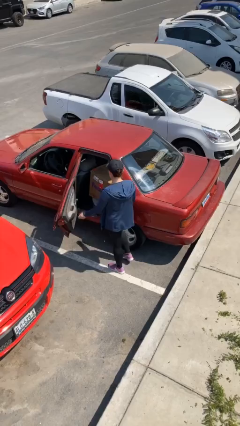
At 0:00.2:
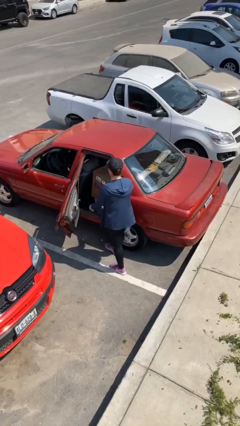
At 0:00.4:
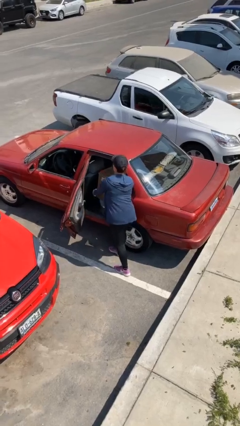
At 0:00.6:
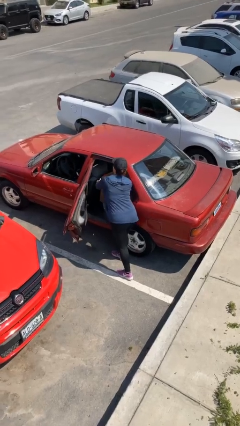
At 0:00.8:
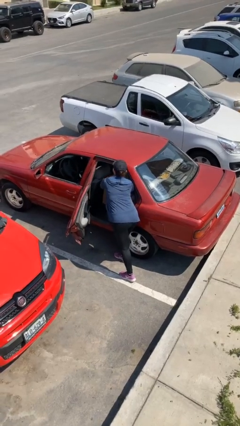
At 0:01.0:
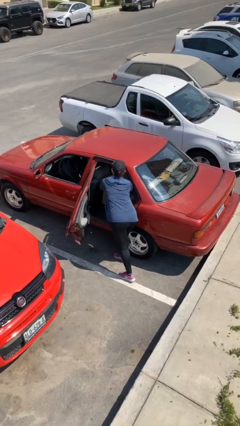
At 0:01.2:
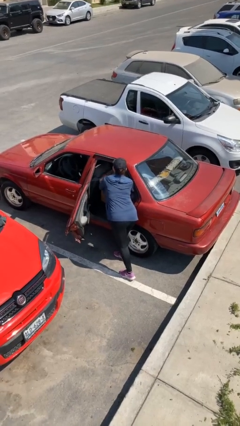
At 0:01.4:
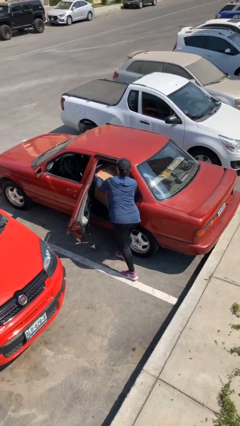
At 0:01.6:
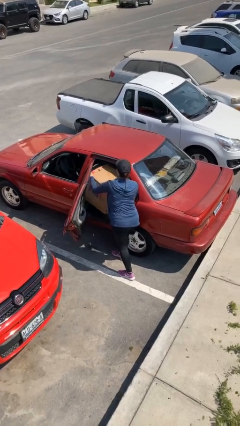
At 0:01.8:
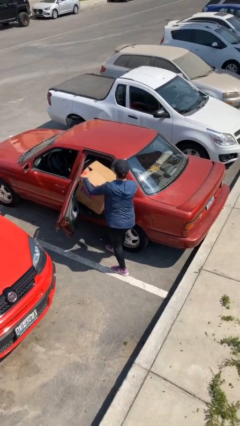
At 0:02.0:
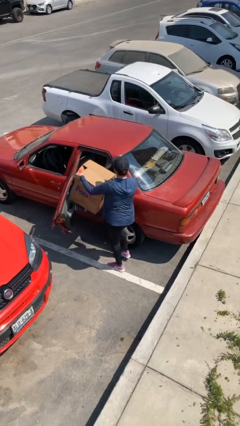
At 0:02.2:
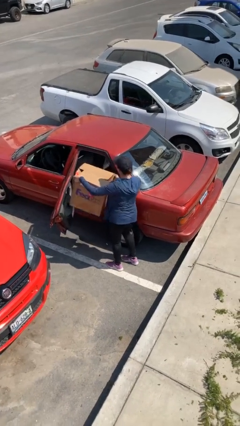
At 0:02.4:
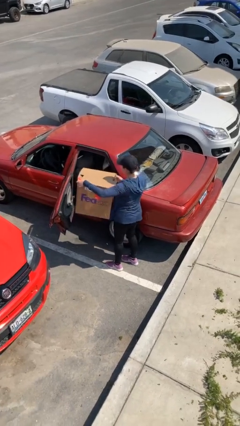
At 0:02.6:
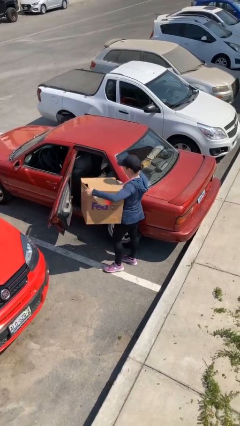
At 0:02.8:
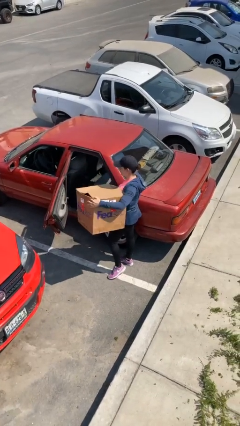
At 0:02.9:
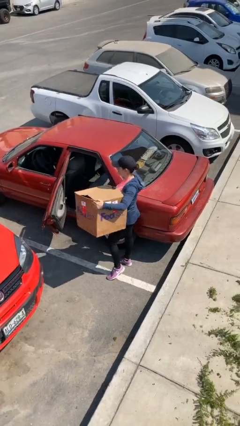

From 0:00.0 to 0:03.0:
person unloads car

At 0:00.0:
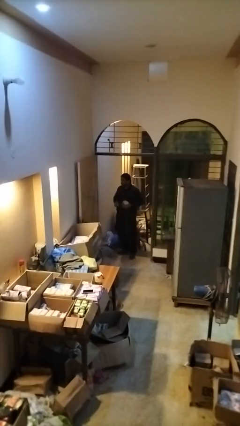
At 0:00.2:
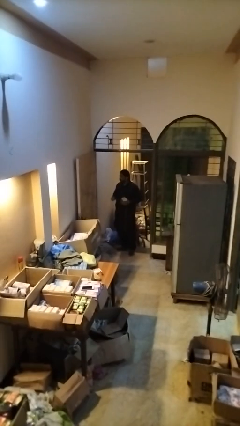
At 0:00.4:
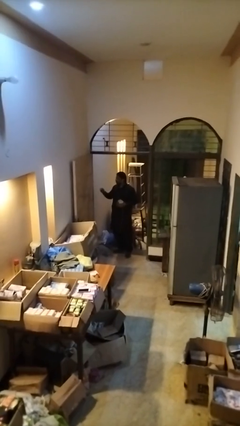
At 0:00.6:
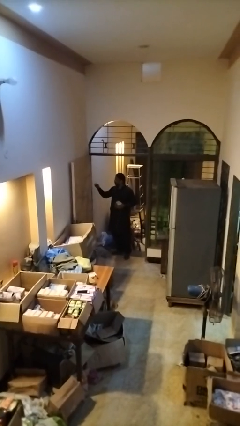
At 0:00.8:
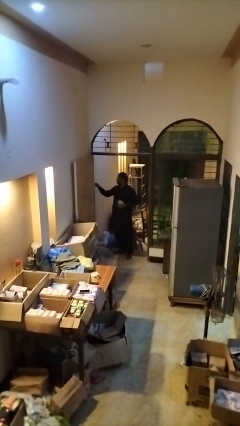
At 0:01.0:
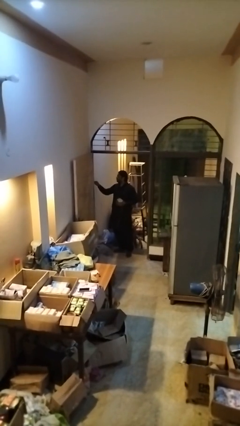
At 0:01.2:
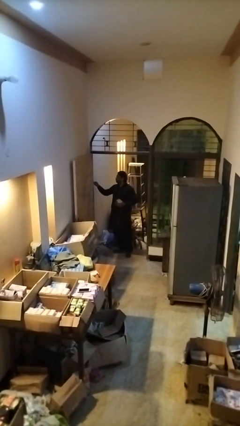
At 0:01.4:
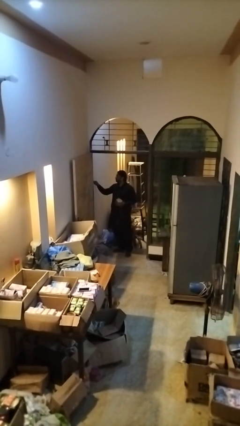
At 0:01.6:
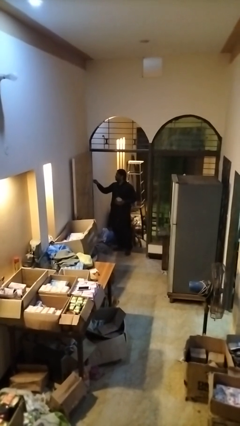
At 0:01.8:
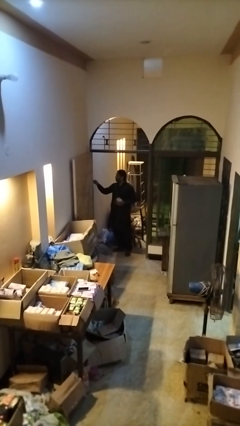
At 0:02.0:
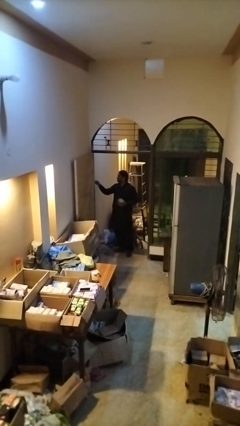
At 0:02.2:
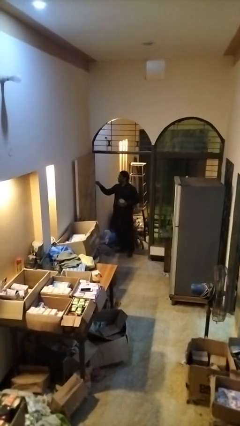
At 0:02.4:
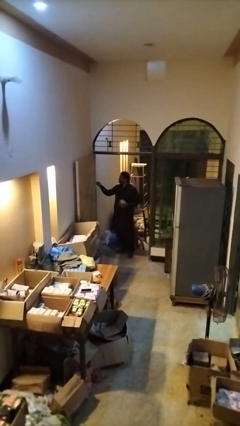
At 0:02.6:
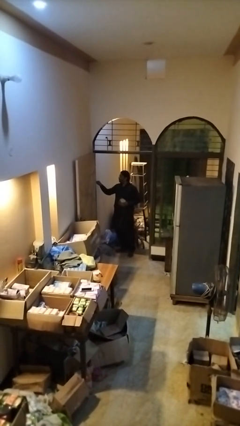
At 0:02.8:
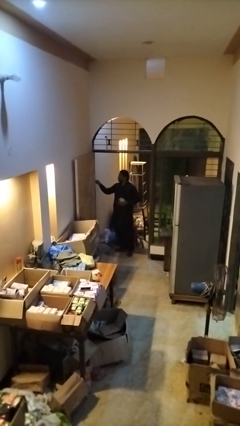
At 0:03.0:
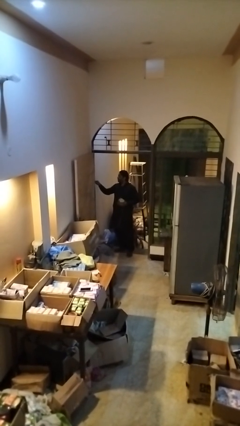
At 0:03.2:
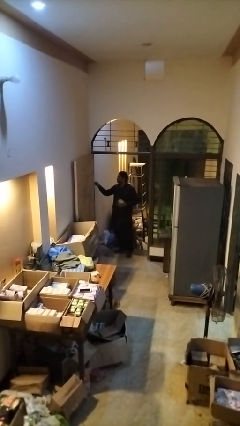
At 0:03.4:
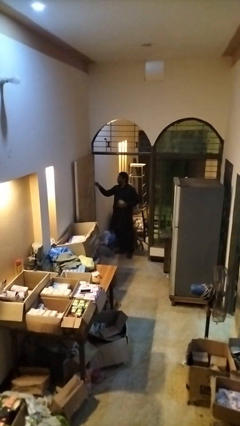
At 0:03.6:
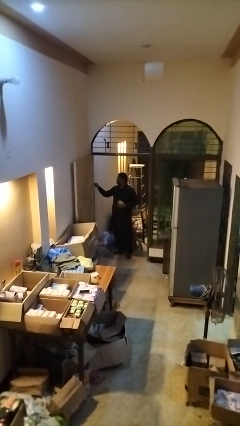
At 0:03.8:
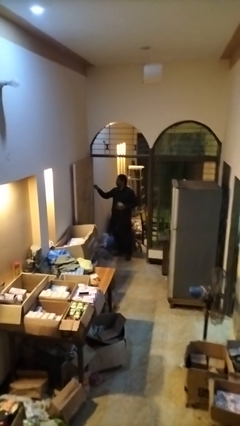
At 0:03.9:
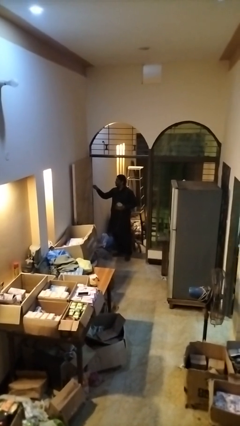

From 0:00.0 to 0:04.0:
person plugs into electrical socket

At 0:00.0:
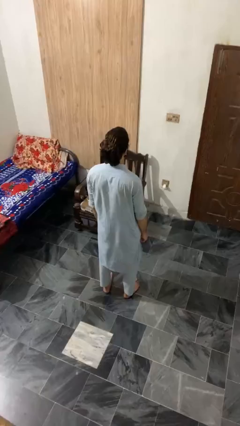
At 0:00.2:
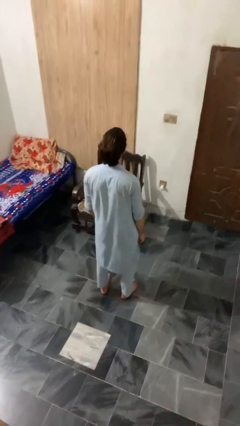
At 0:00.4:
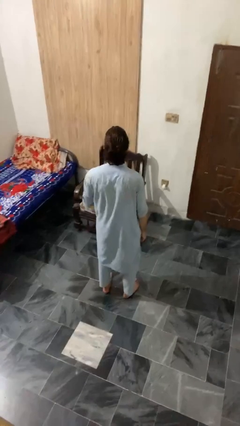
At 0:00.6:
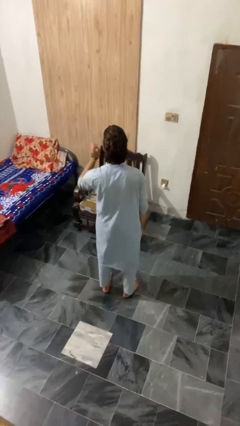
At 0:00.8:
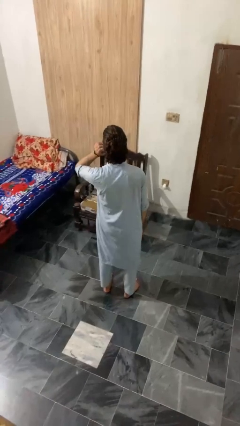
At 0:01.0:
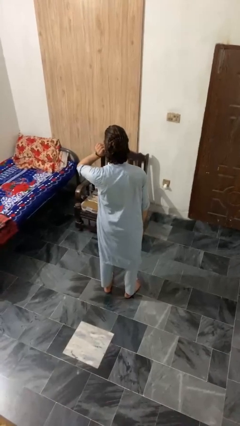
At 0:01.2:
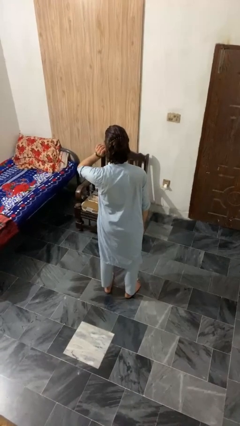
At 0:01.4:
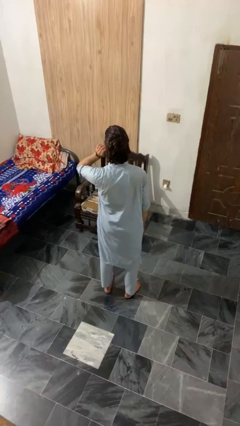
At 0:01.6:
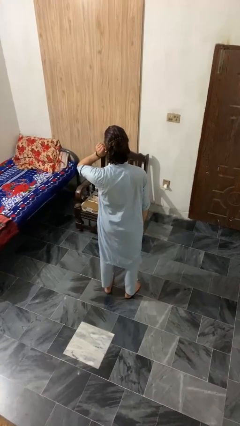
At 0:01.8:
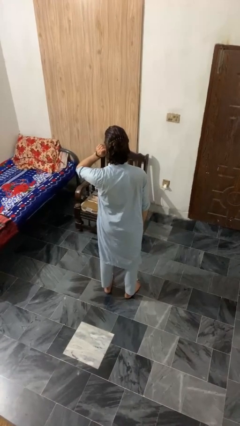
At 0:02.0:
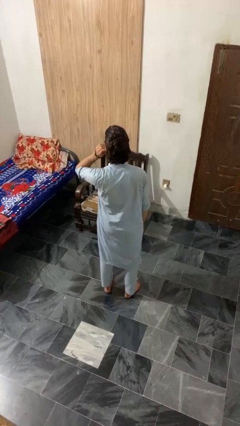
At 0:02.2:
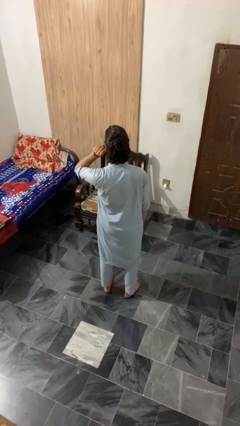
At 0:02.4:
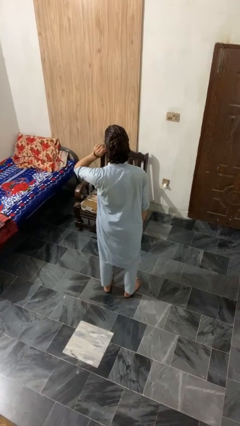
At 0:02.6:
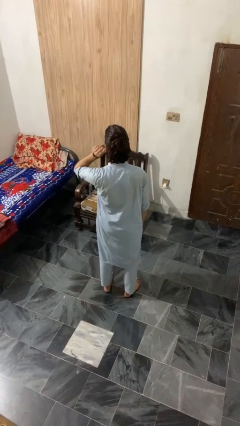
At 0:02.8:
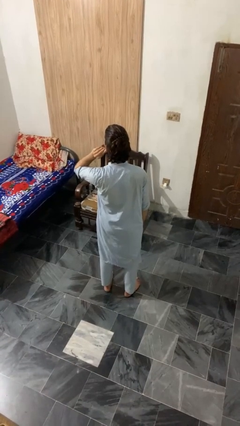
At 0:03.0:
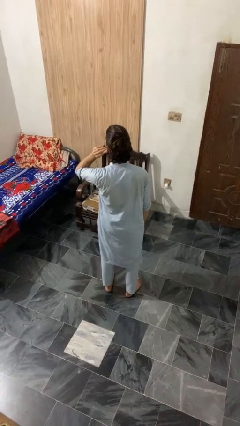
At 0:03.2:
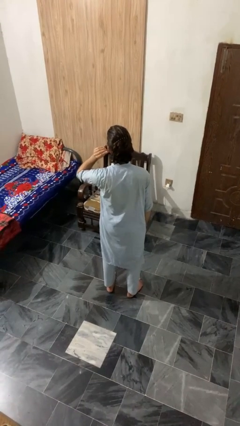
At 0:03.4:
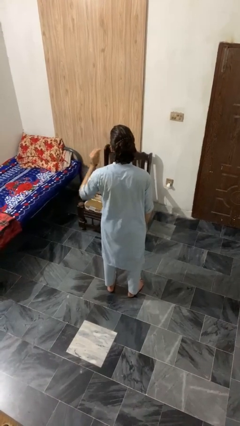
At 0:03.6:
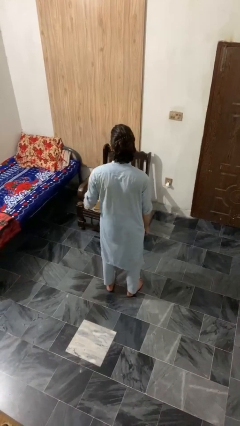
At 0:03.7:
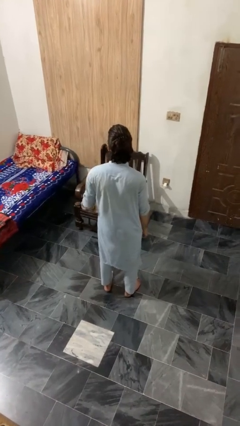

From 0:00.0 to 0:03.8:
person touches earlobe

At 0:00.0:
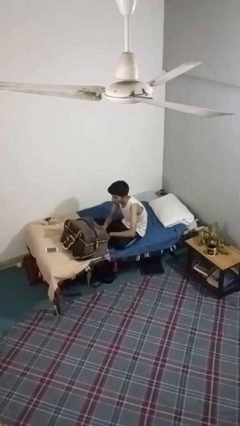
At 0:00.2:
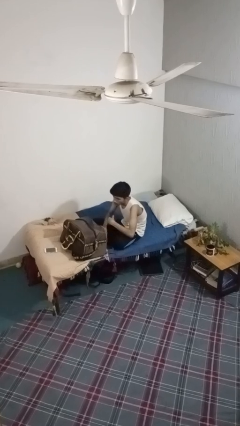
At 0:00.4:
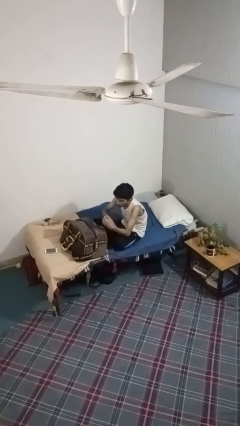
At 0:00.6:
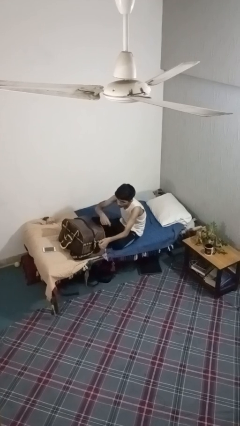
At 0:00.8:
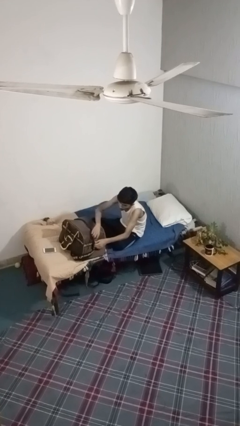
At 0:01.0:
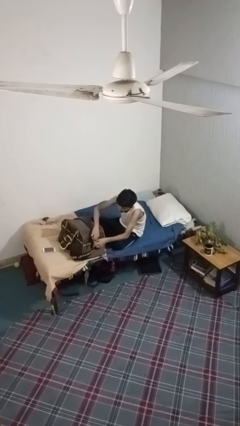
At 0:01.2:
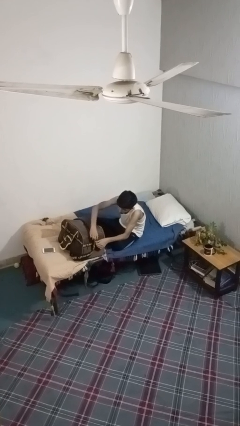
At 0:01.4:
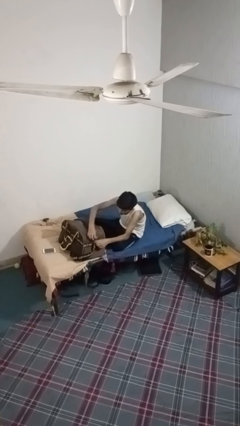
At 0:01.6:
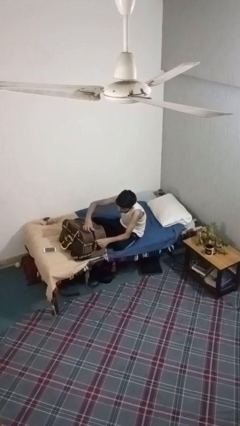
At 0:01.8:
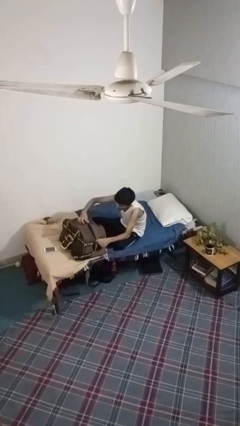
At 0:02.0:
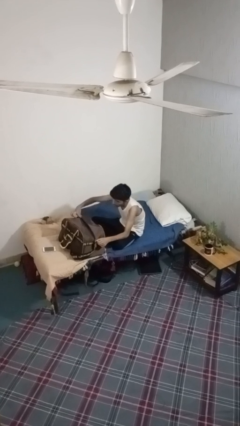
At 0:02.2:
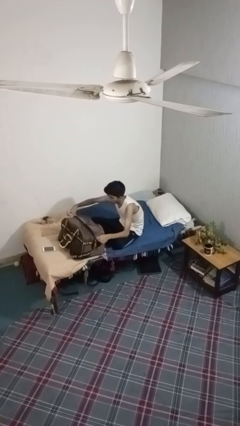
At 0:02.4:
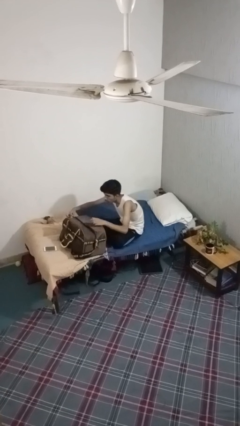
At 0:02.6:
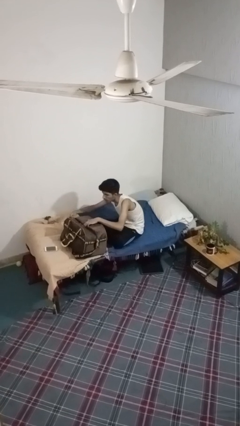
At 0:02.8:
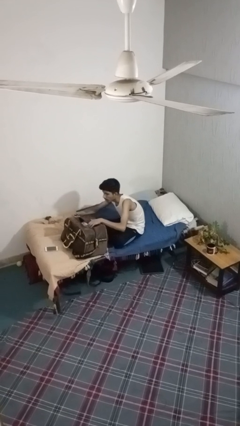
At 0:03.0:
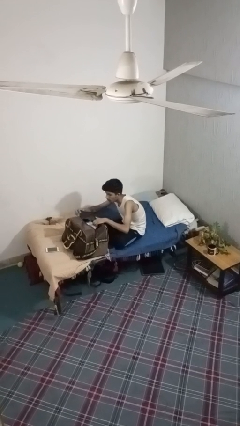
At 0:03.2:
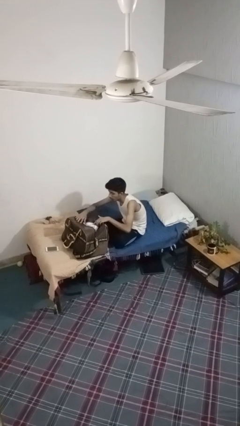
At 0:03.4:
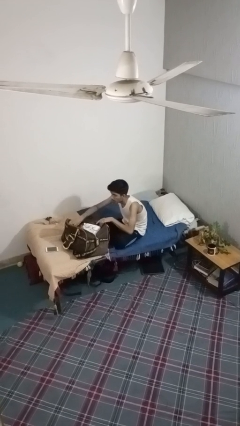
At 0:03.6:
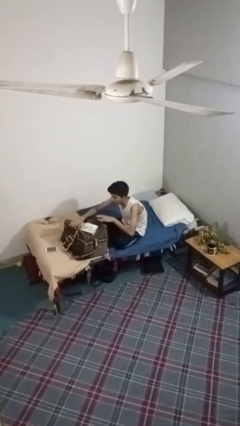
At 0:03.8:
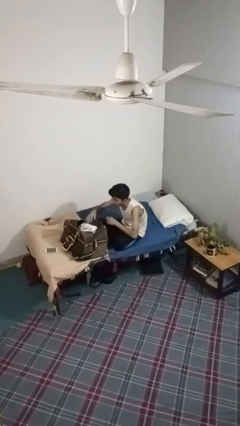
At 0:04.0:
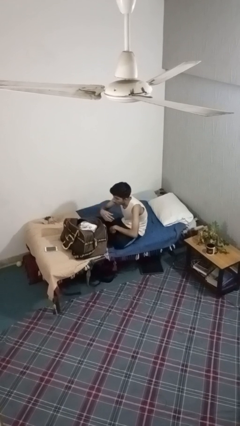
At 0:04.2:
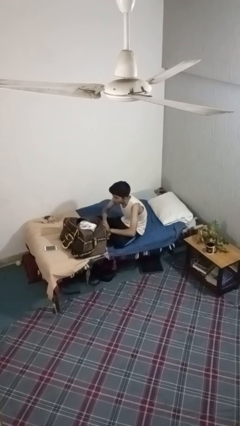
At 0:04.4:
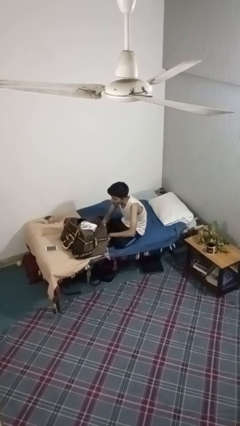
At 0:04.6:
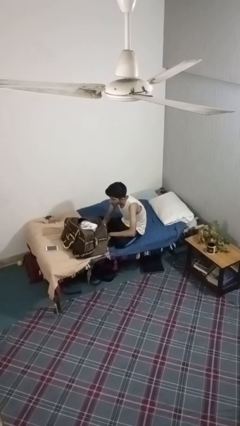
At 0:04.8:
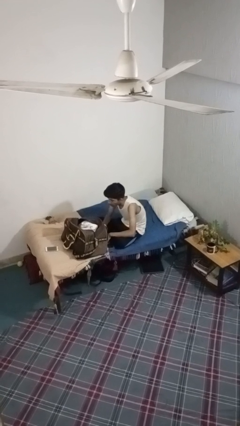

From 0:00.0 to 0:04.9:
person opens suitcase

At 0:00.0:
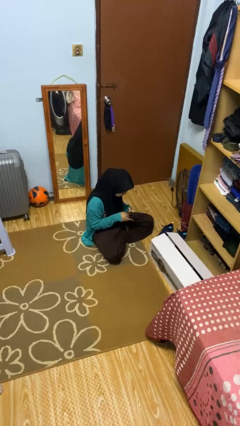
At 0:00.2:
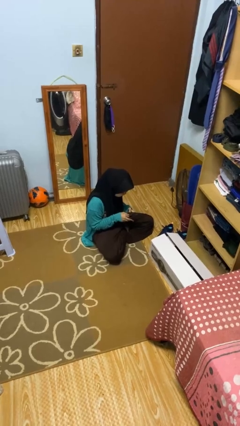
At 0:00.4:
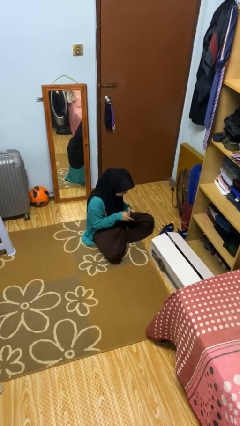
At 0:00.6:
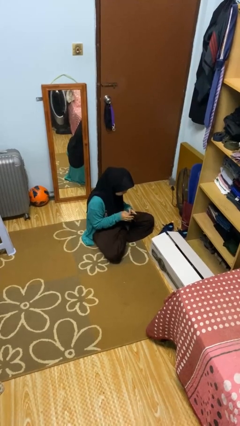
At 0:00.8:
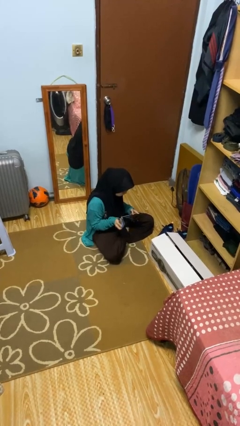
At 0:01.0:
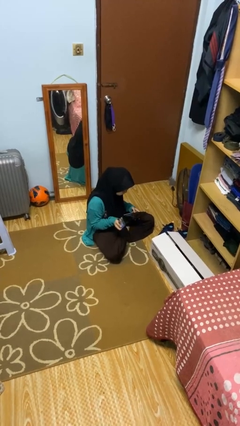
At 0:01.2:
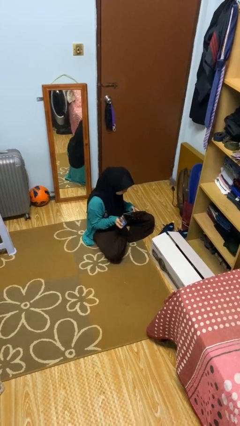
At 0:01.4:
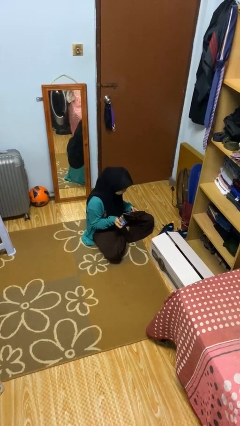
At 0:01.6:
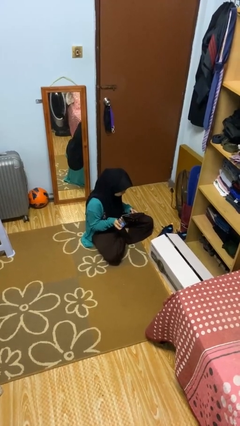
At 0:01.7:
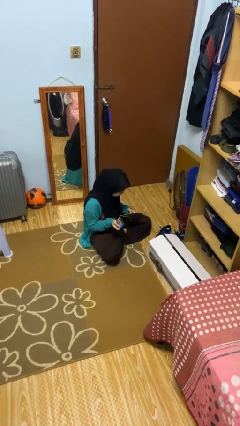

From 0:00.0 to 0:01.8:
person takes object from purse

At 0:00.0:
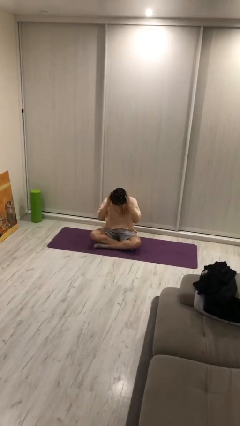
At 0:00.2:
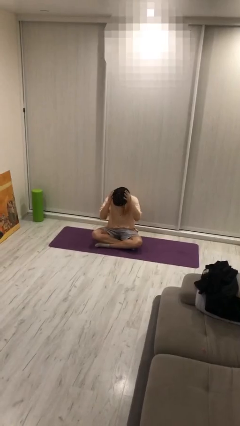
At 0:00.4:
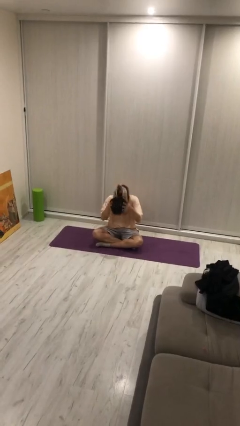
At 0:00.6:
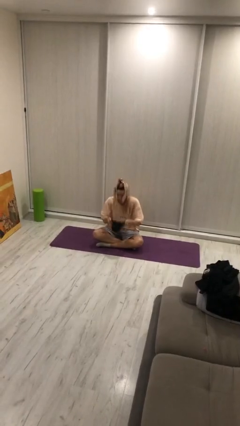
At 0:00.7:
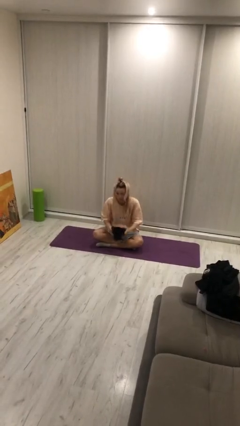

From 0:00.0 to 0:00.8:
person takes off hat
